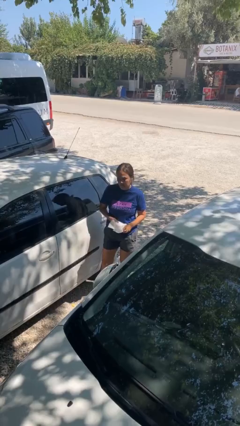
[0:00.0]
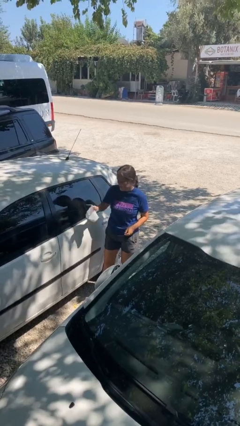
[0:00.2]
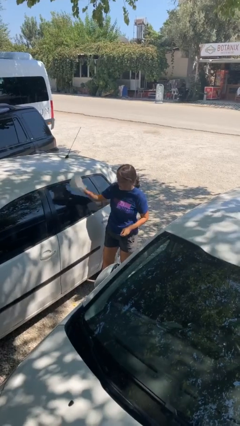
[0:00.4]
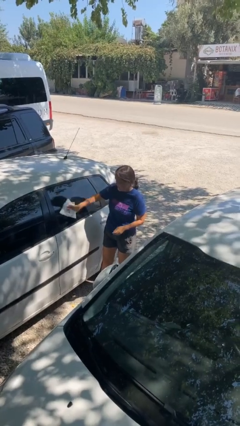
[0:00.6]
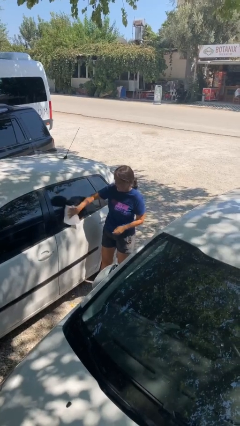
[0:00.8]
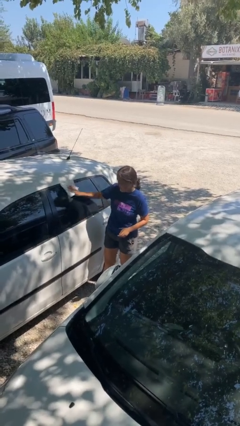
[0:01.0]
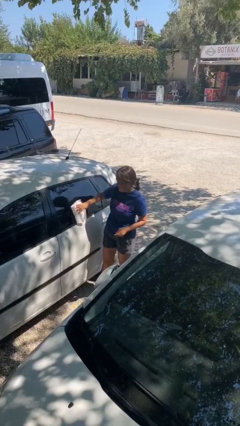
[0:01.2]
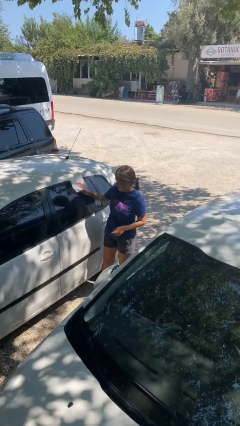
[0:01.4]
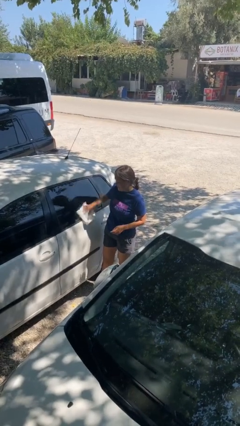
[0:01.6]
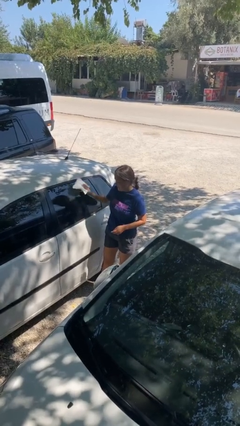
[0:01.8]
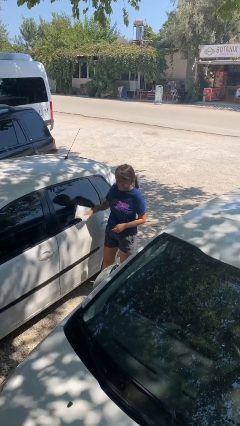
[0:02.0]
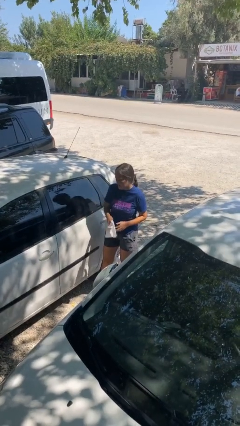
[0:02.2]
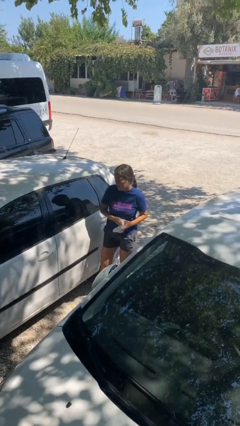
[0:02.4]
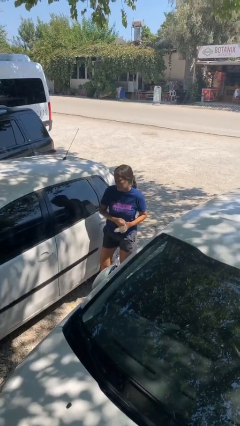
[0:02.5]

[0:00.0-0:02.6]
person polishes car with rag

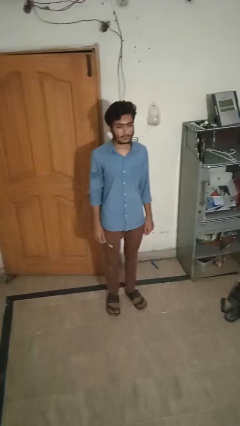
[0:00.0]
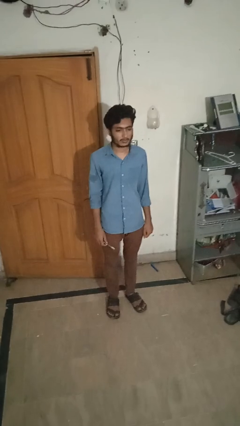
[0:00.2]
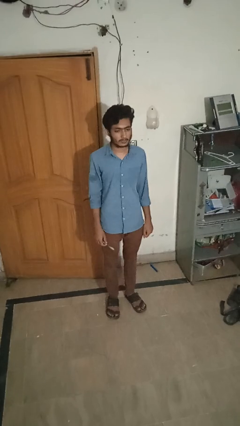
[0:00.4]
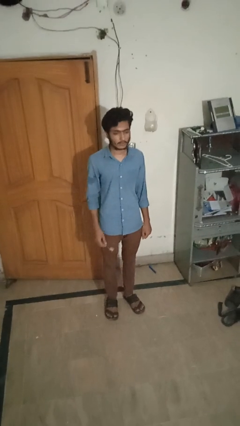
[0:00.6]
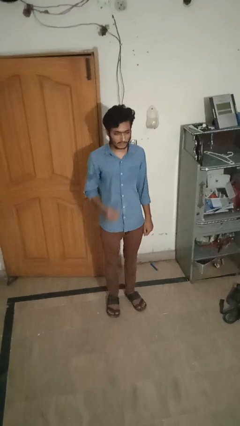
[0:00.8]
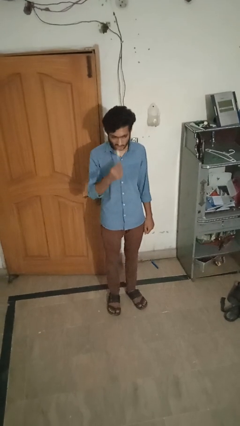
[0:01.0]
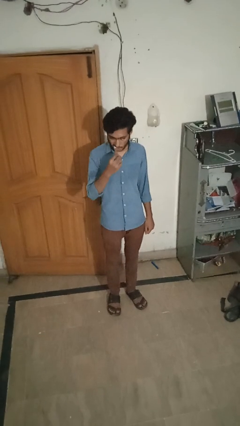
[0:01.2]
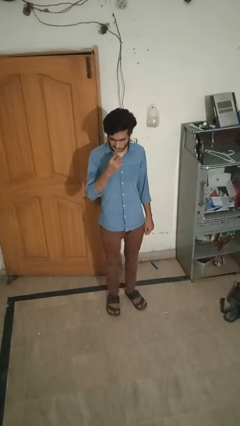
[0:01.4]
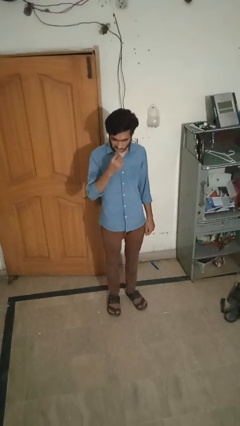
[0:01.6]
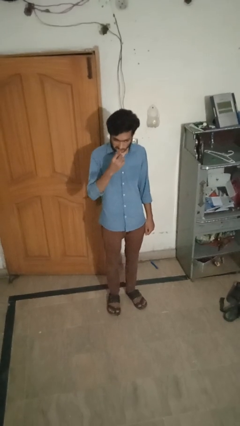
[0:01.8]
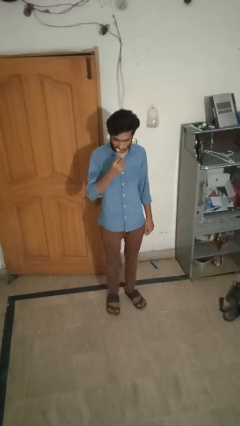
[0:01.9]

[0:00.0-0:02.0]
person brushes teeth

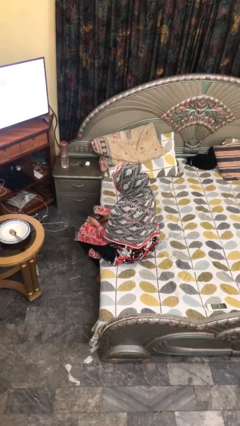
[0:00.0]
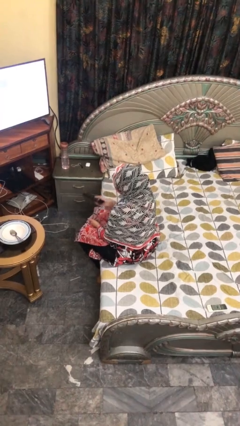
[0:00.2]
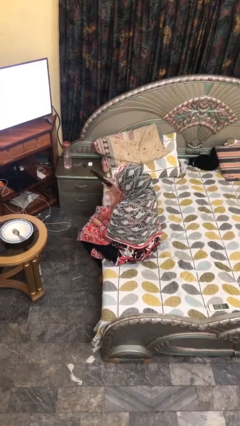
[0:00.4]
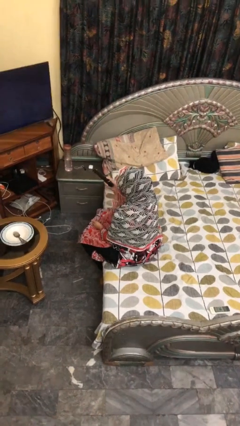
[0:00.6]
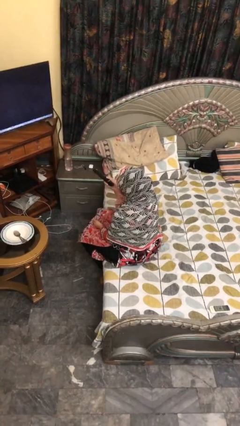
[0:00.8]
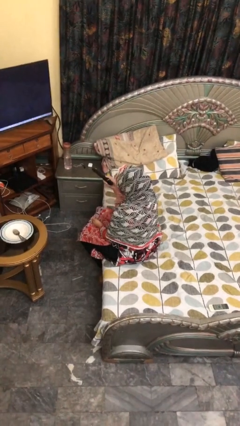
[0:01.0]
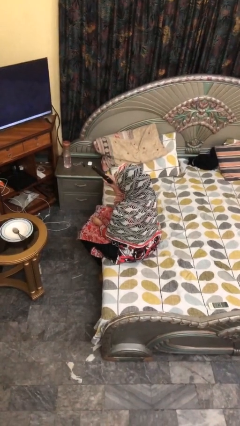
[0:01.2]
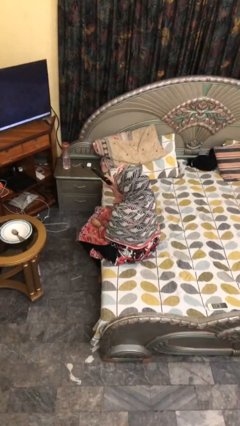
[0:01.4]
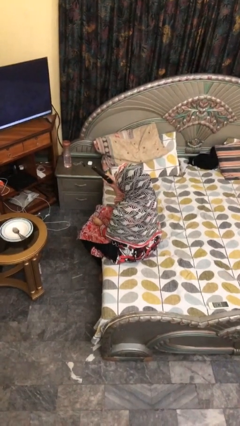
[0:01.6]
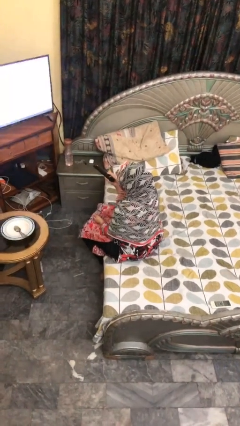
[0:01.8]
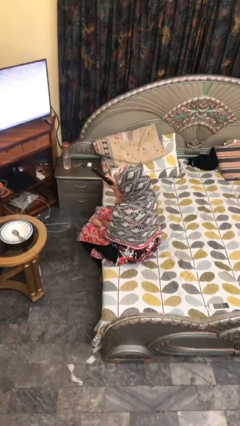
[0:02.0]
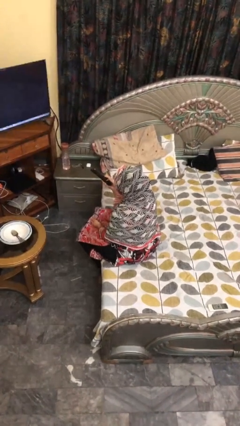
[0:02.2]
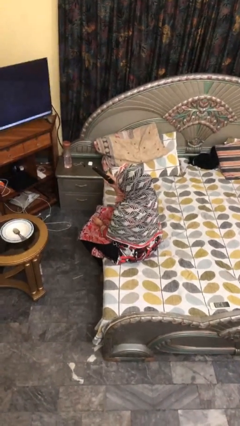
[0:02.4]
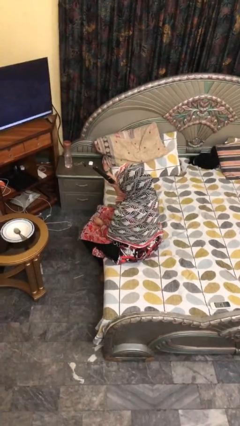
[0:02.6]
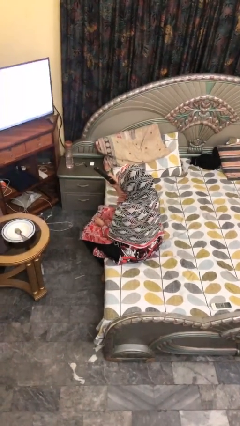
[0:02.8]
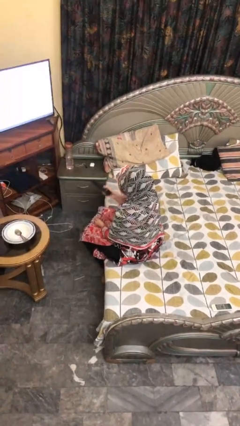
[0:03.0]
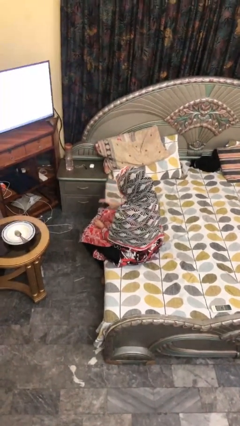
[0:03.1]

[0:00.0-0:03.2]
person uses television remote

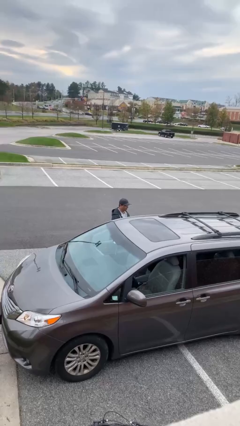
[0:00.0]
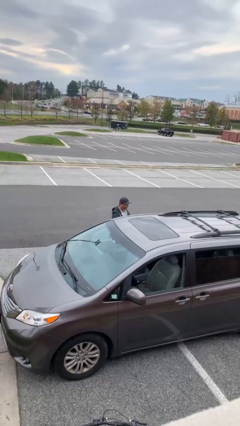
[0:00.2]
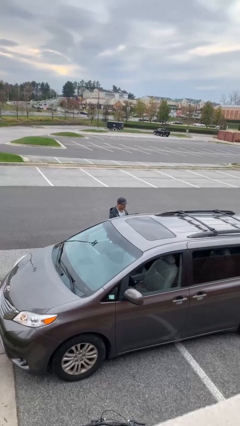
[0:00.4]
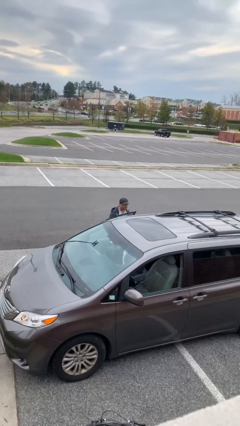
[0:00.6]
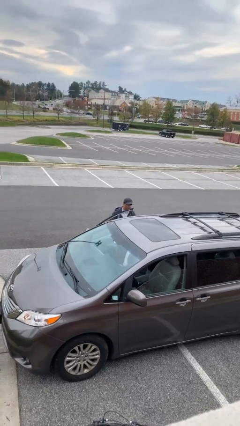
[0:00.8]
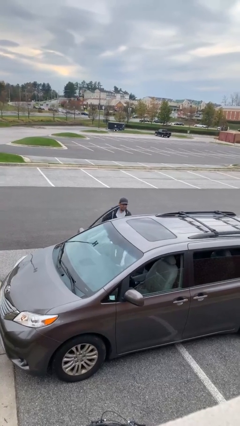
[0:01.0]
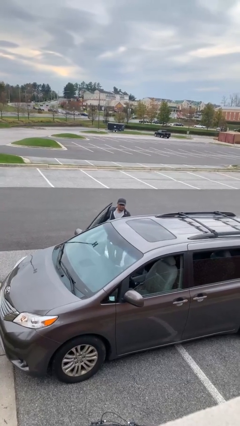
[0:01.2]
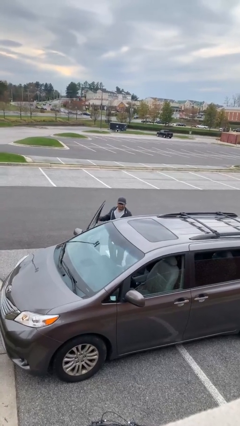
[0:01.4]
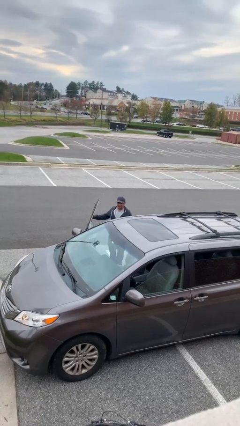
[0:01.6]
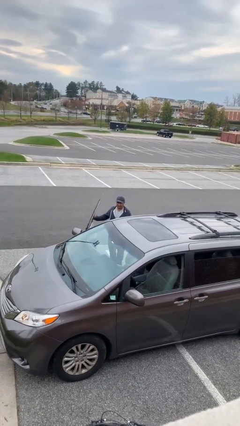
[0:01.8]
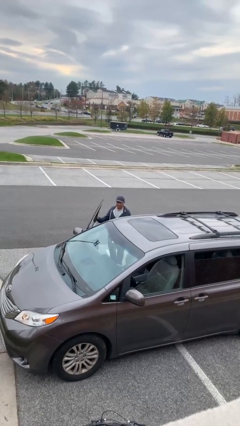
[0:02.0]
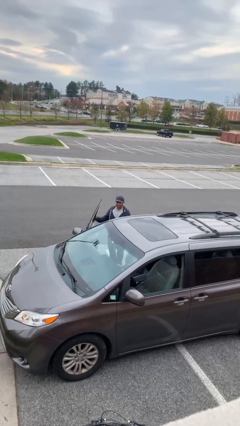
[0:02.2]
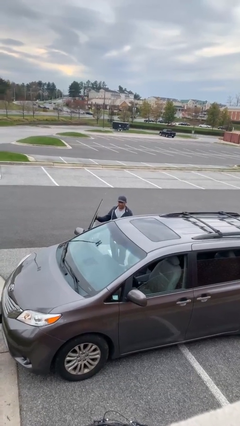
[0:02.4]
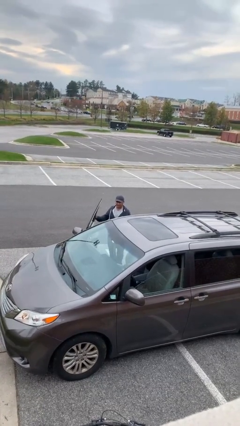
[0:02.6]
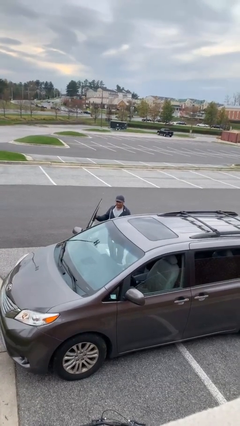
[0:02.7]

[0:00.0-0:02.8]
person opens car door

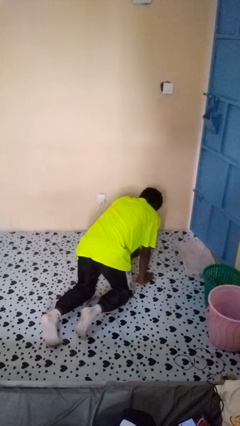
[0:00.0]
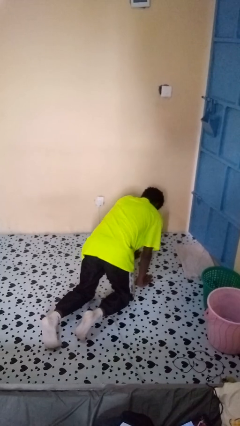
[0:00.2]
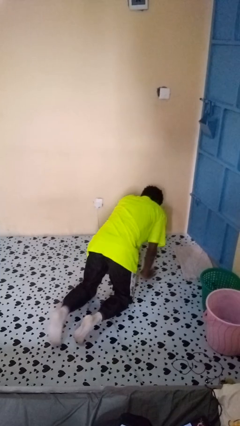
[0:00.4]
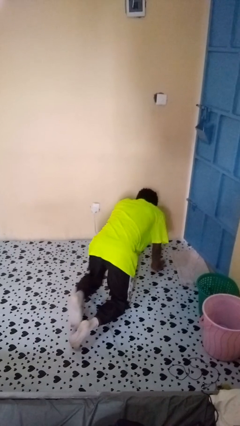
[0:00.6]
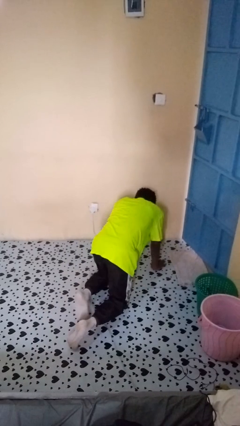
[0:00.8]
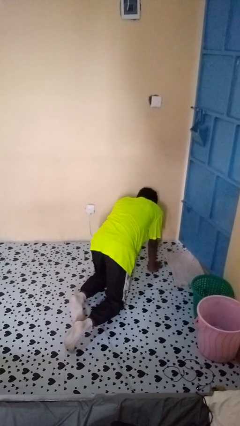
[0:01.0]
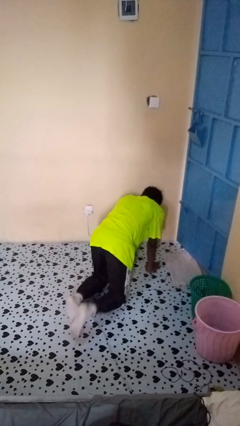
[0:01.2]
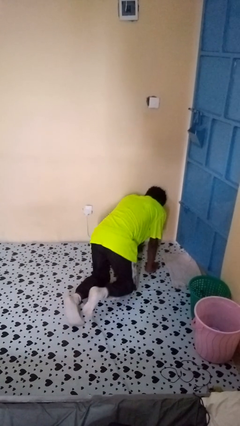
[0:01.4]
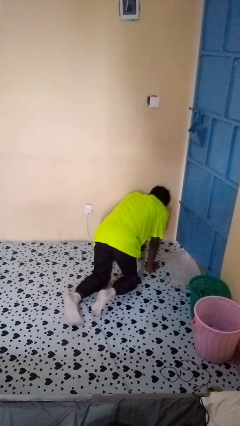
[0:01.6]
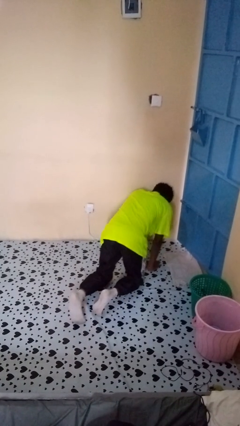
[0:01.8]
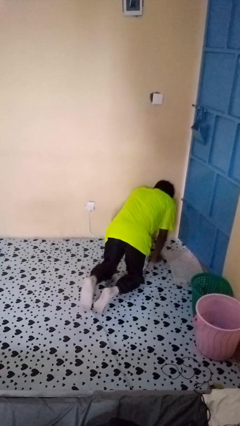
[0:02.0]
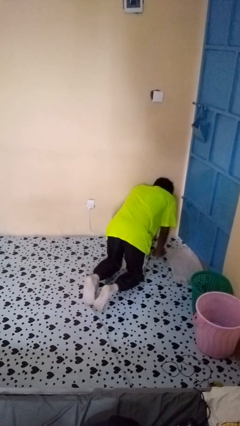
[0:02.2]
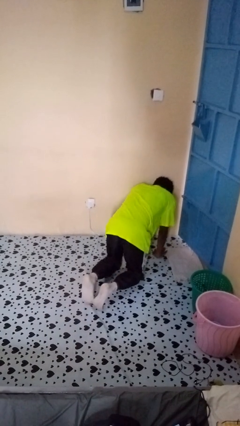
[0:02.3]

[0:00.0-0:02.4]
person crawls

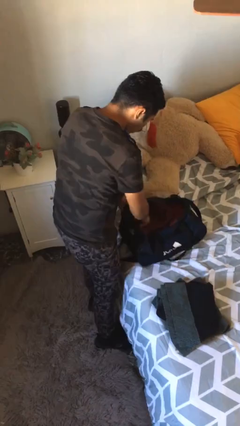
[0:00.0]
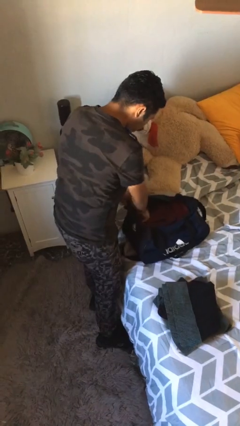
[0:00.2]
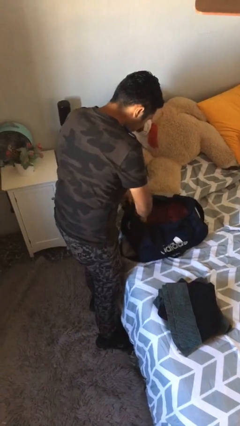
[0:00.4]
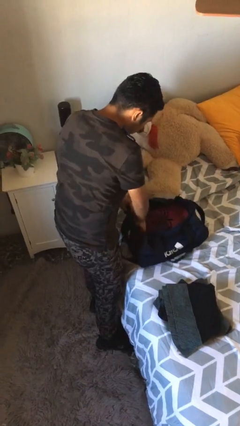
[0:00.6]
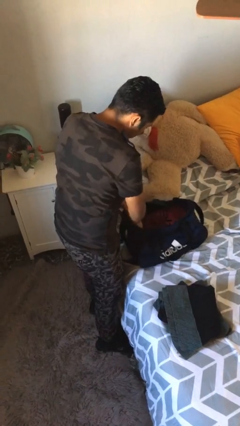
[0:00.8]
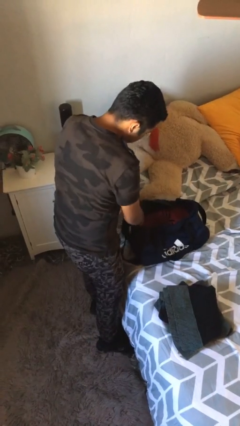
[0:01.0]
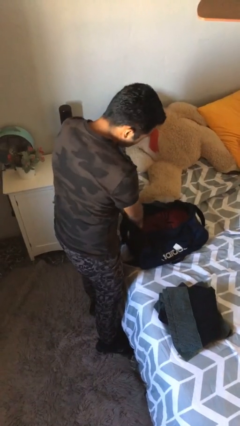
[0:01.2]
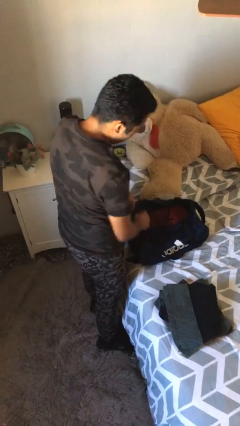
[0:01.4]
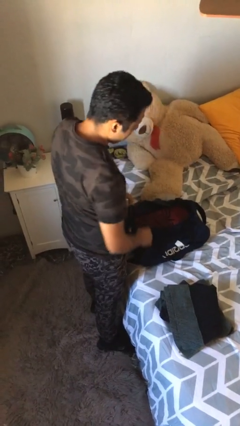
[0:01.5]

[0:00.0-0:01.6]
person loads clothes into suitcase

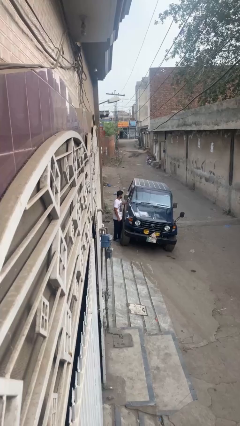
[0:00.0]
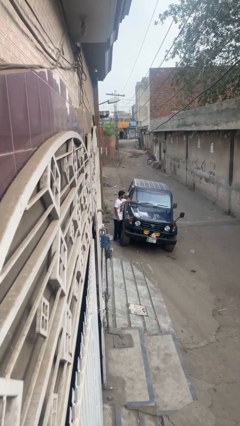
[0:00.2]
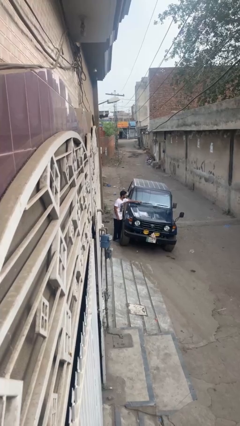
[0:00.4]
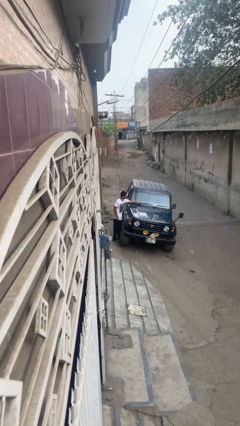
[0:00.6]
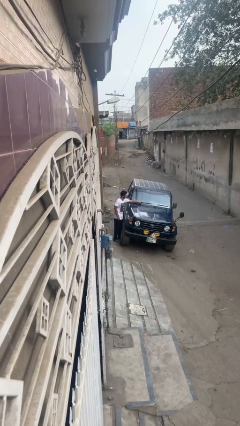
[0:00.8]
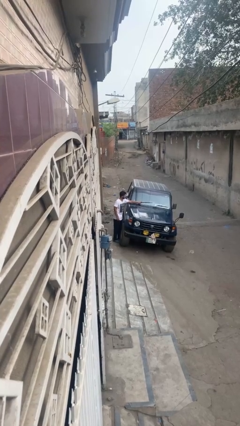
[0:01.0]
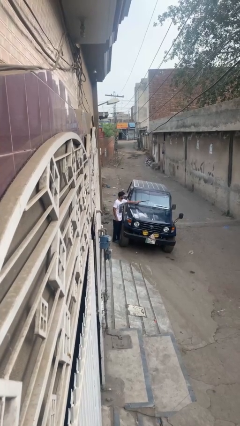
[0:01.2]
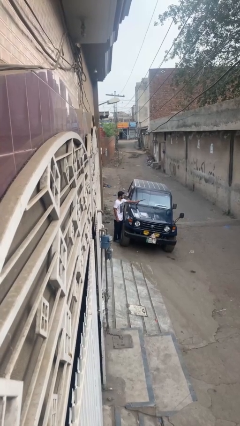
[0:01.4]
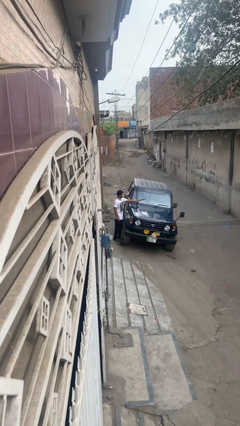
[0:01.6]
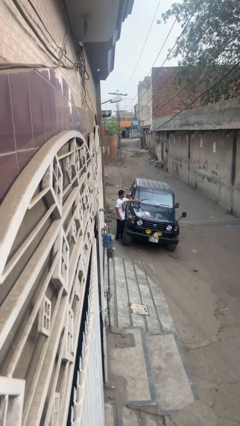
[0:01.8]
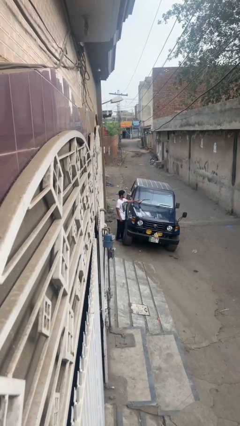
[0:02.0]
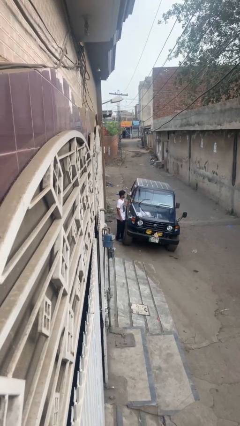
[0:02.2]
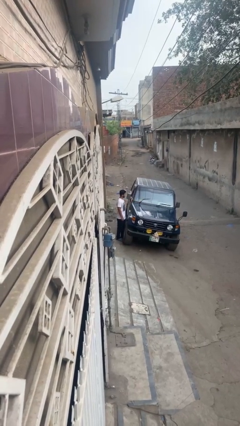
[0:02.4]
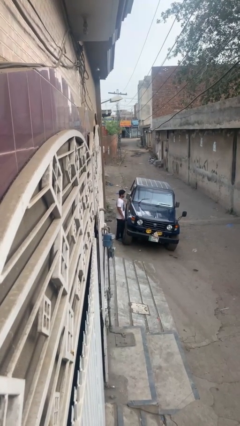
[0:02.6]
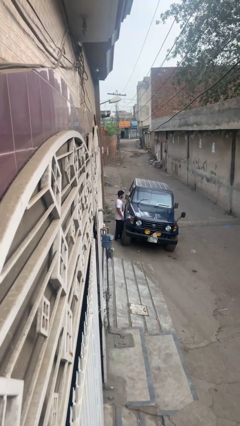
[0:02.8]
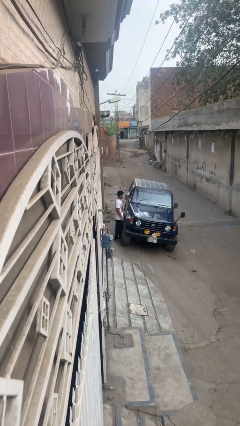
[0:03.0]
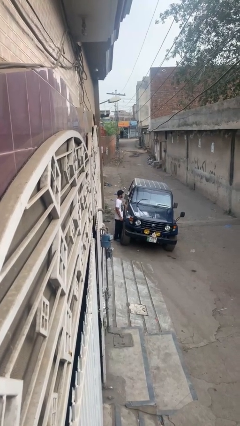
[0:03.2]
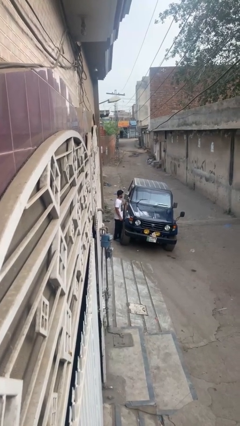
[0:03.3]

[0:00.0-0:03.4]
person flips up car wipers
